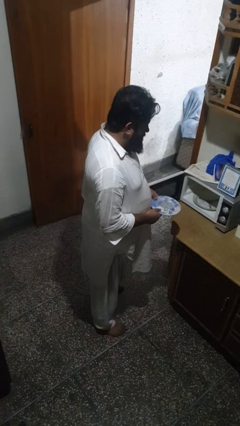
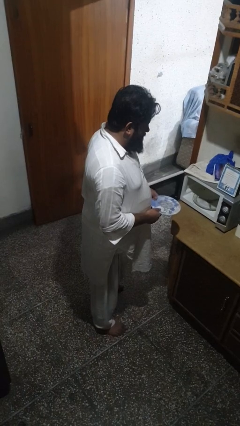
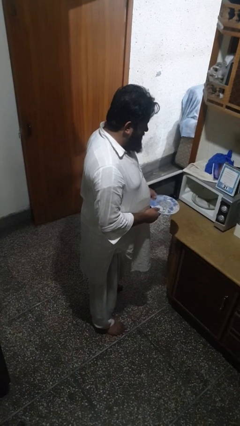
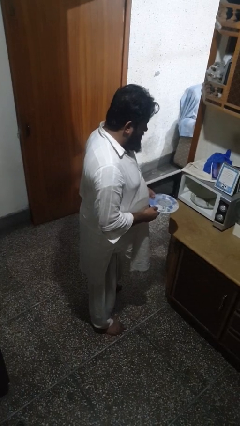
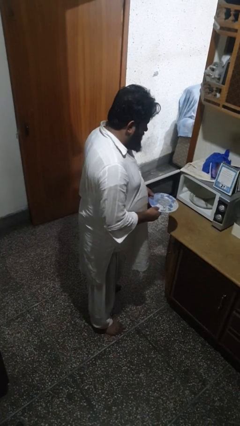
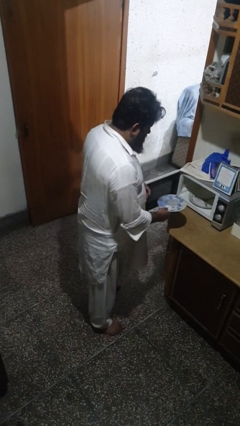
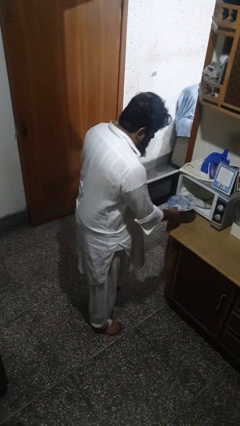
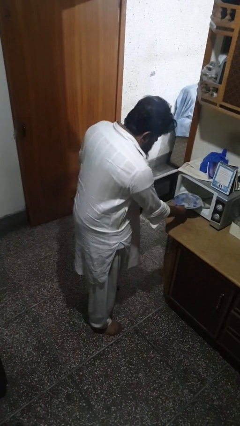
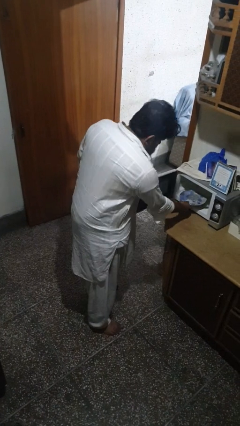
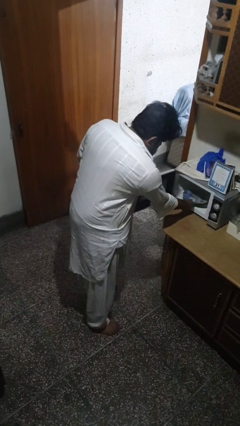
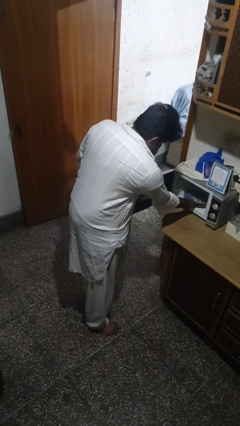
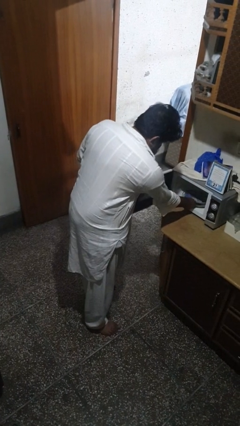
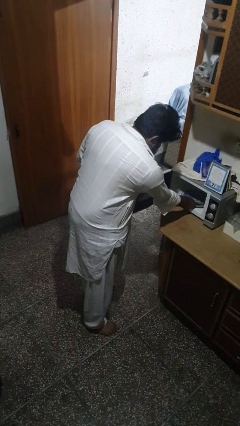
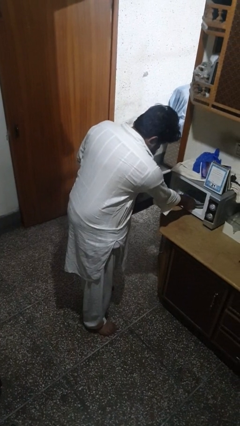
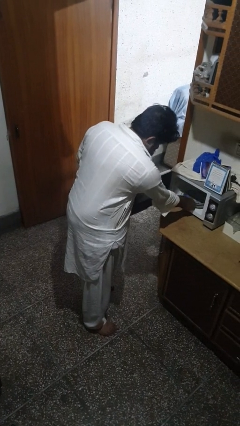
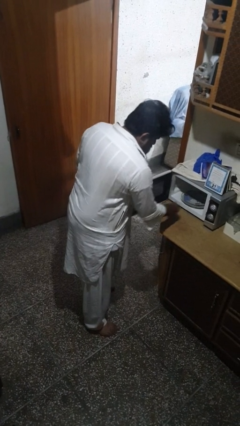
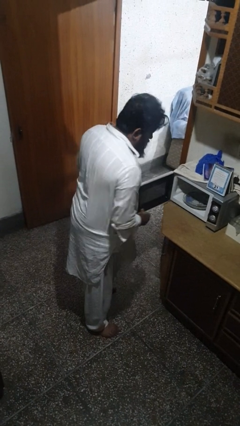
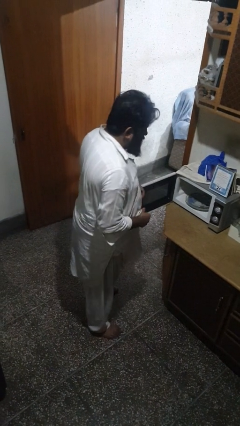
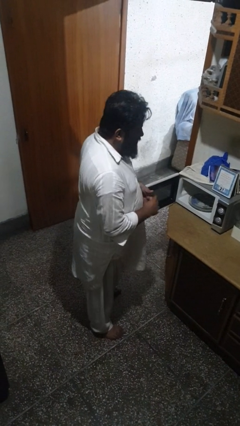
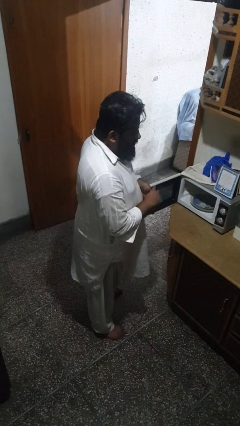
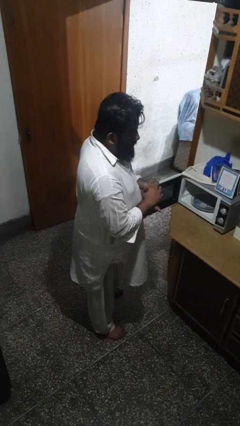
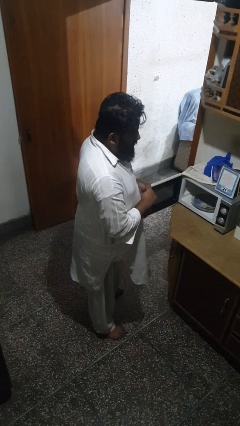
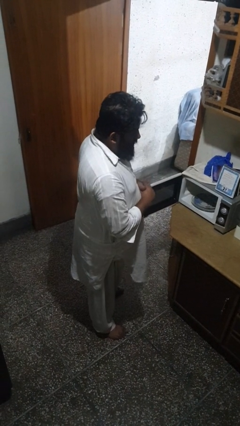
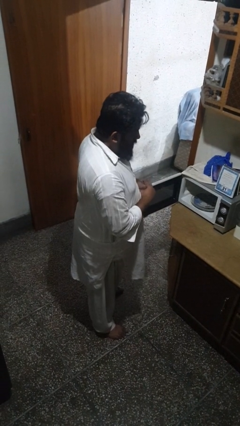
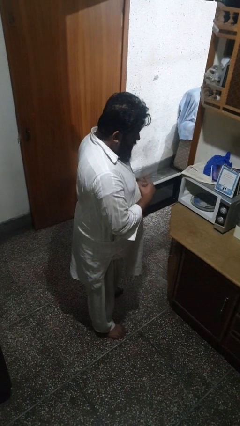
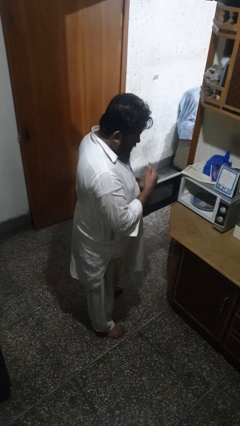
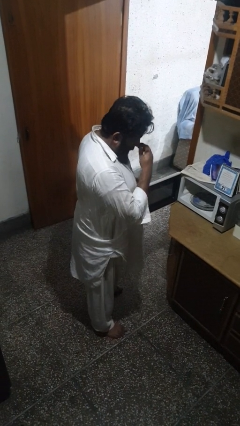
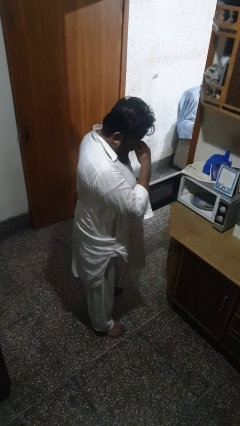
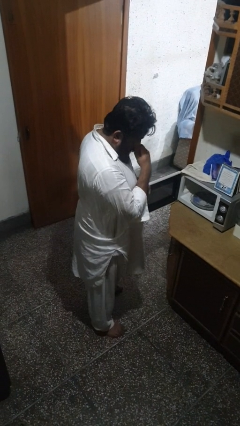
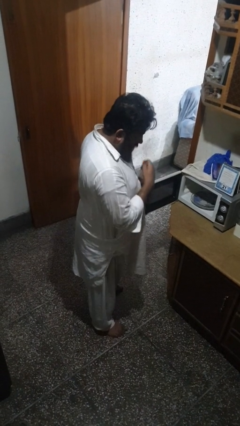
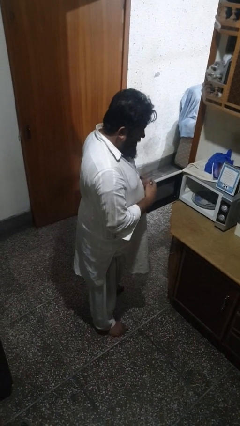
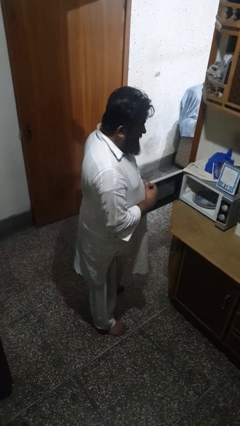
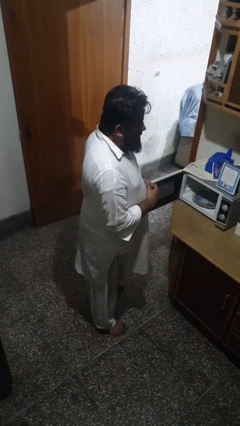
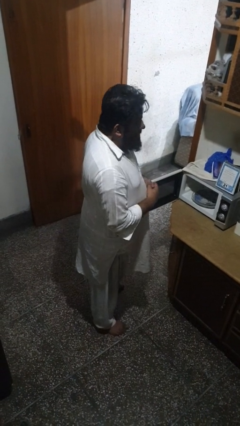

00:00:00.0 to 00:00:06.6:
person puts object into oven

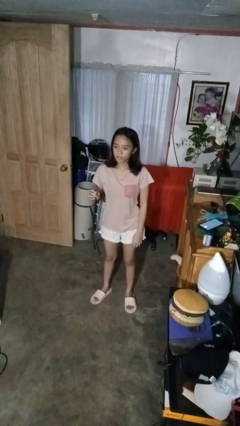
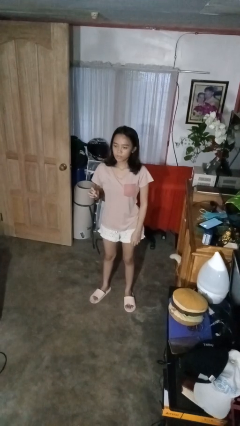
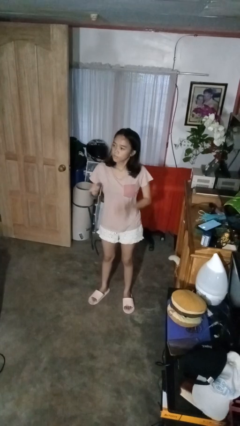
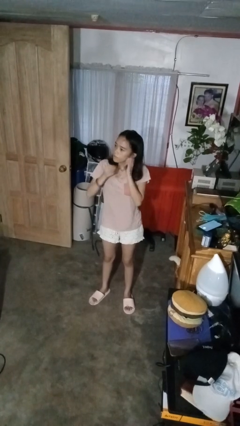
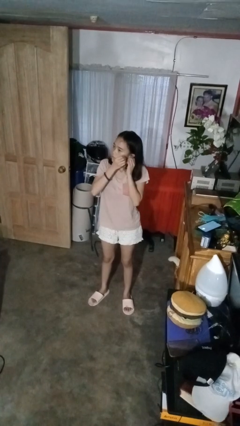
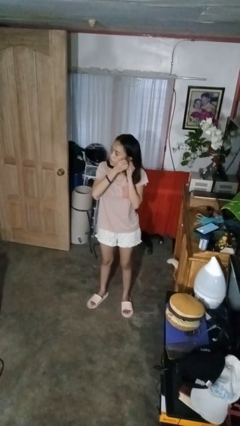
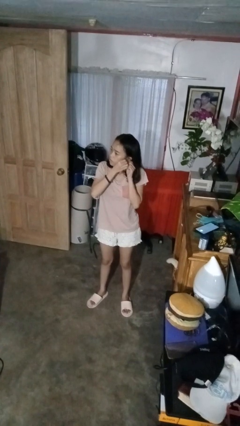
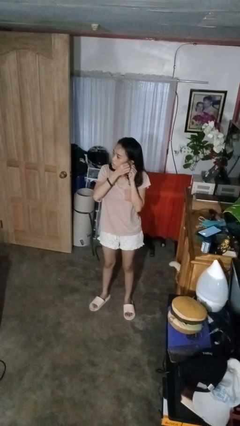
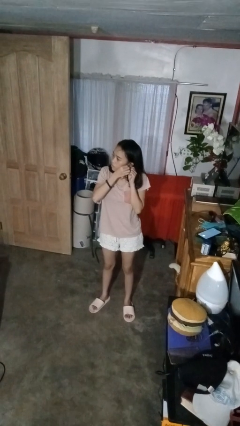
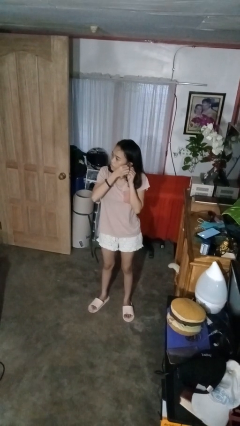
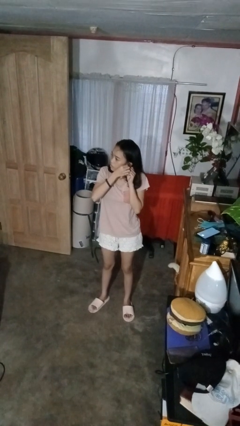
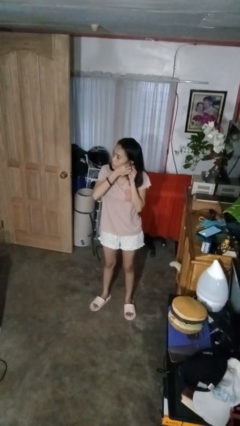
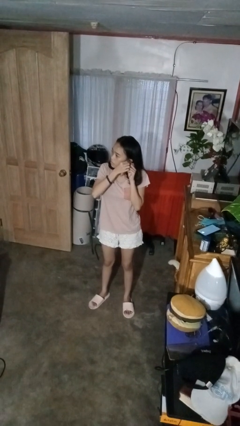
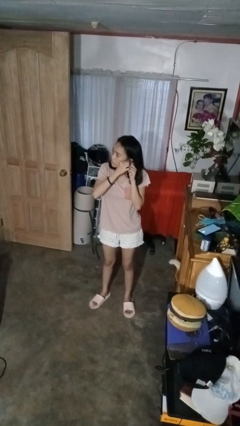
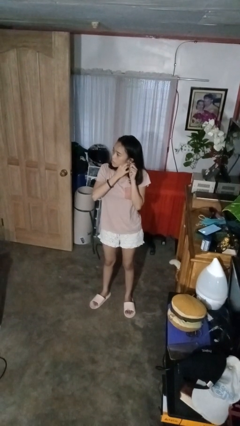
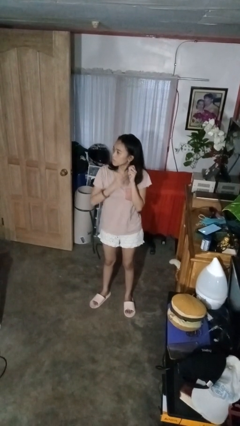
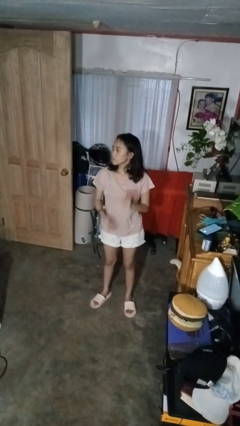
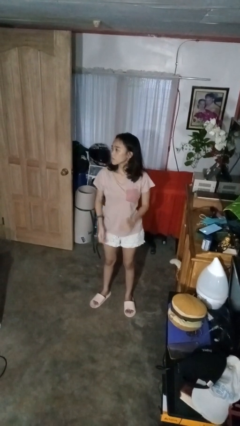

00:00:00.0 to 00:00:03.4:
person puts on earrings

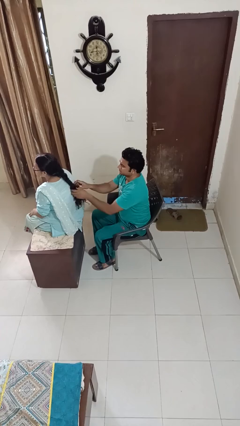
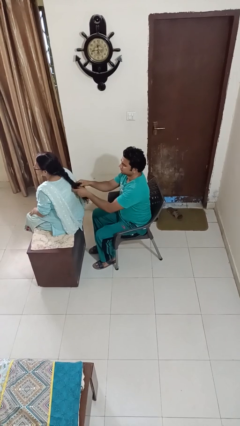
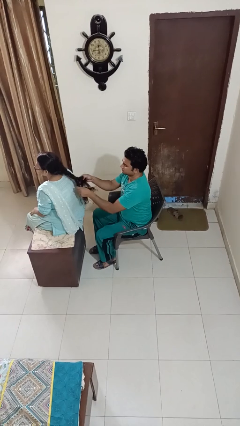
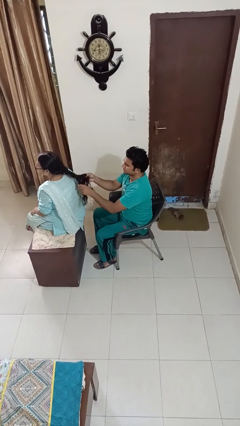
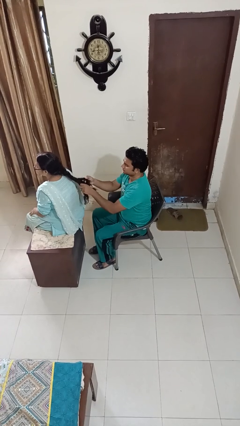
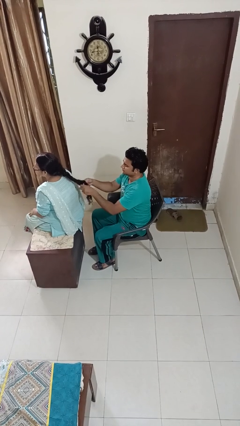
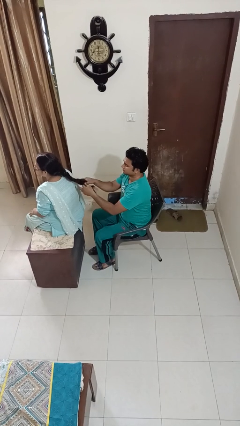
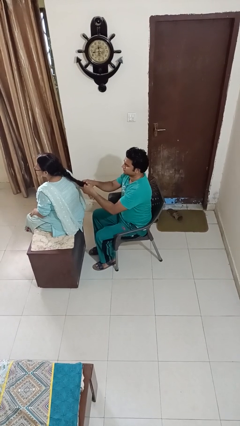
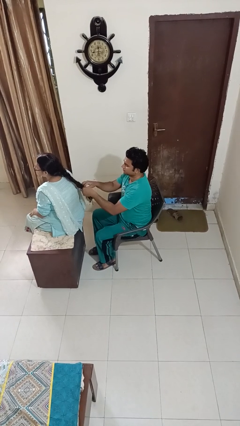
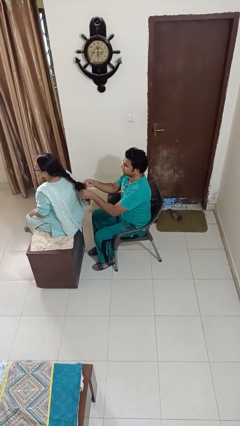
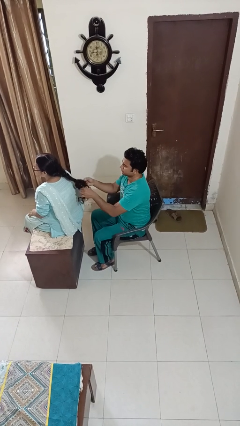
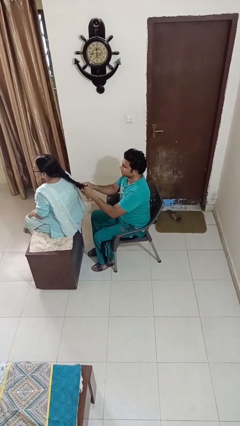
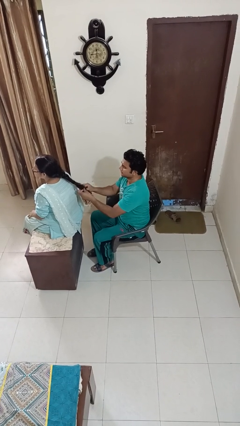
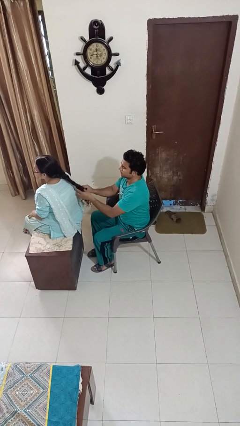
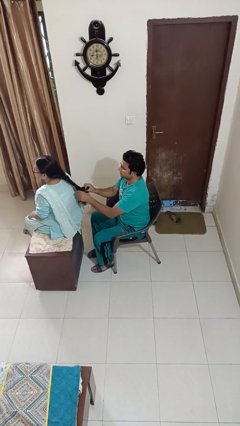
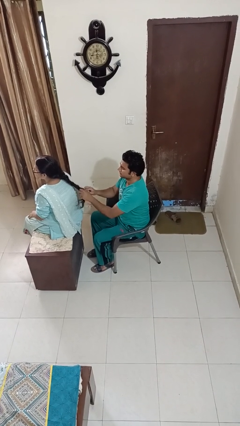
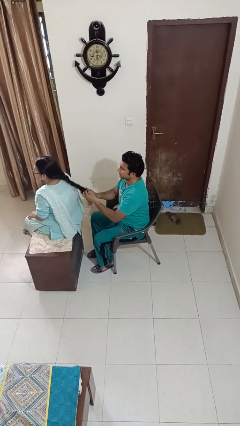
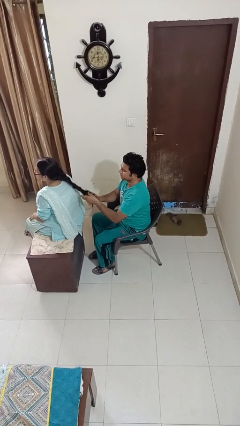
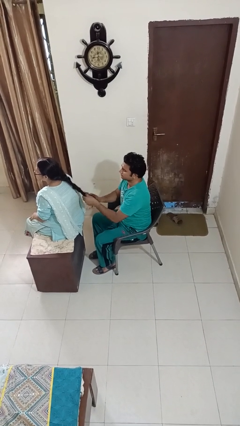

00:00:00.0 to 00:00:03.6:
person braids hair of person

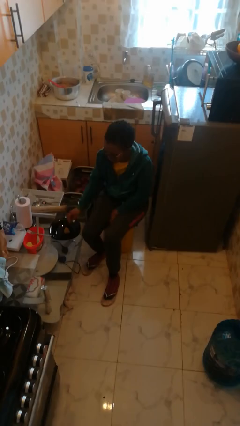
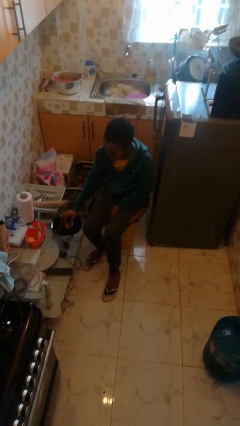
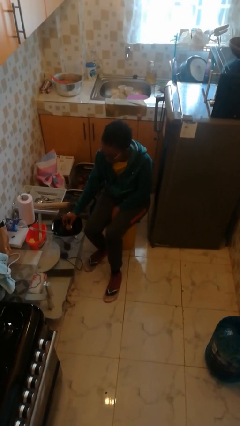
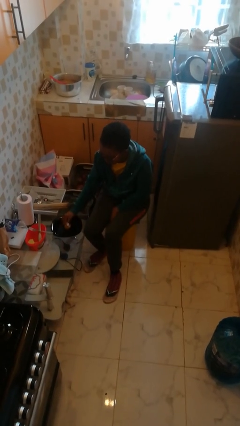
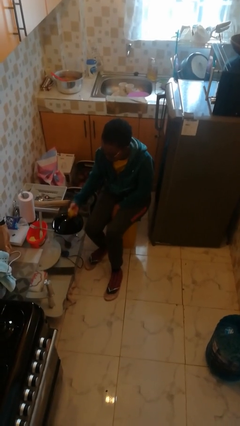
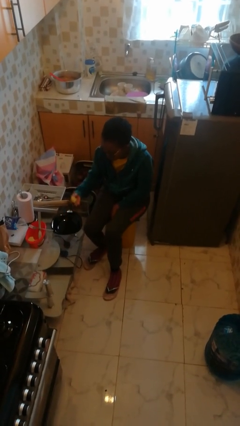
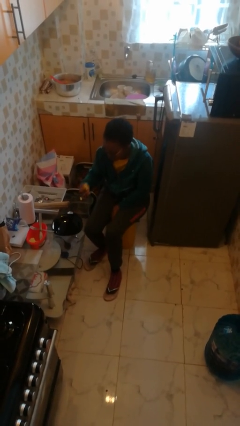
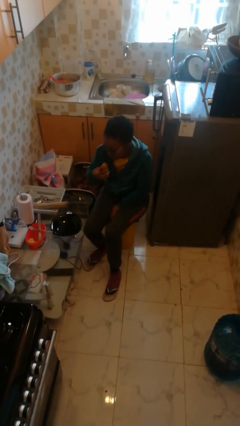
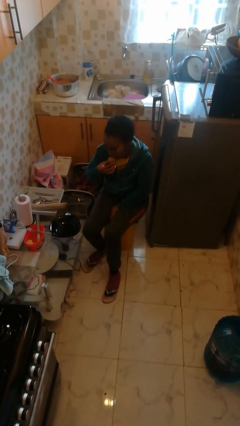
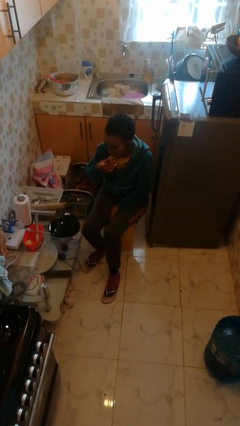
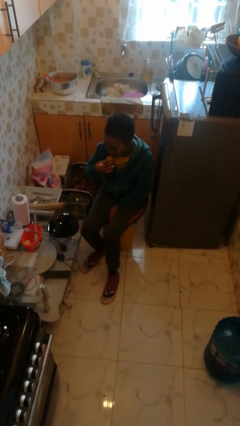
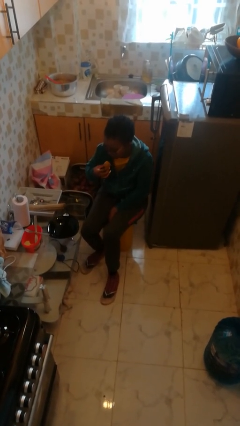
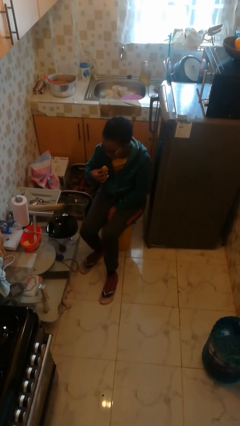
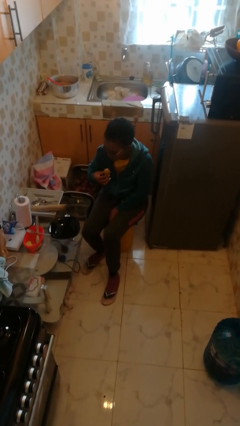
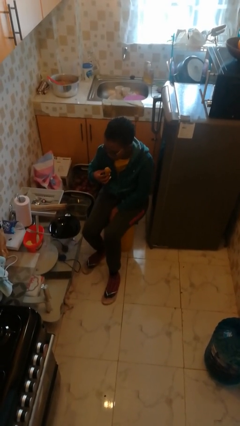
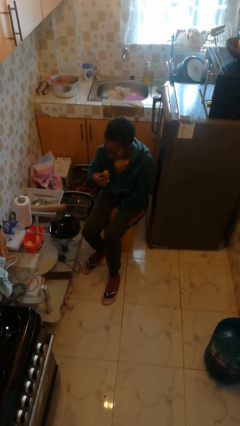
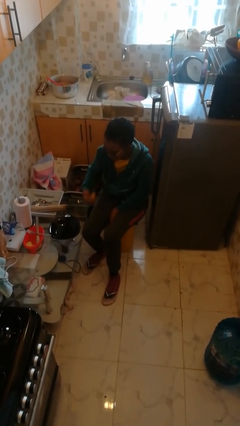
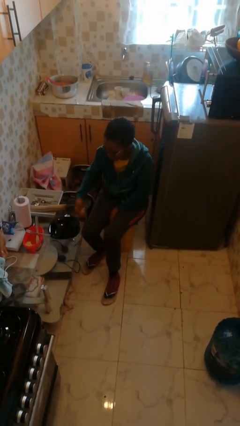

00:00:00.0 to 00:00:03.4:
person eats with hands

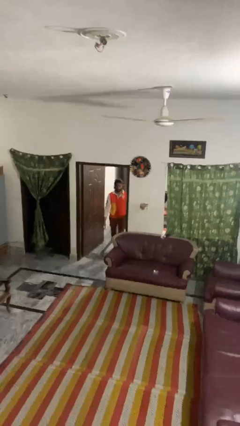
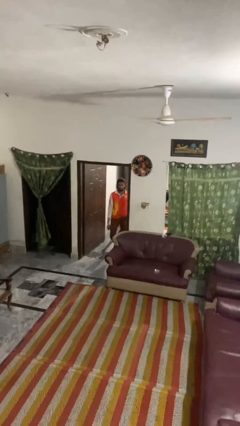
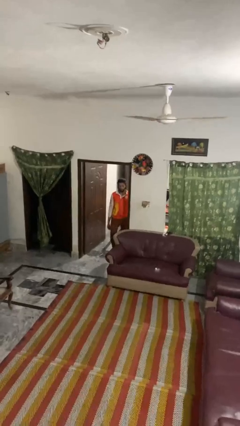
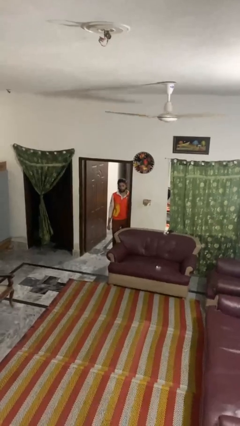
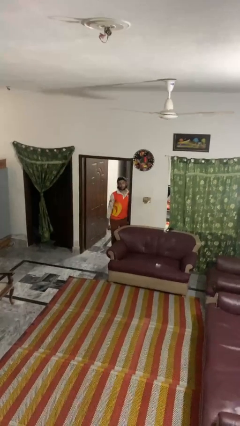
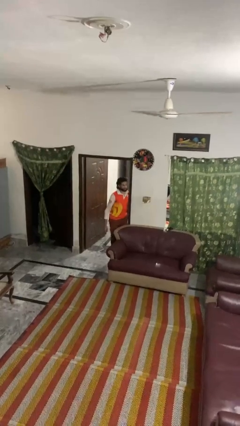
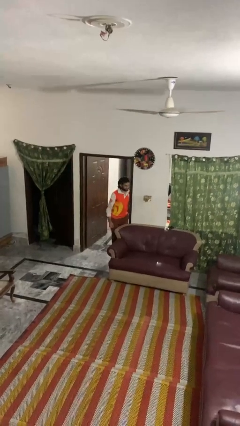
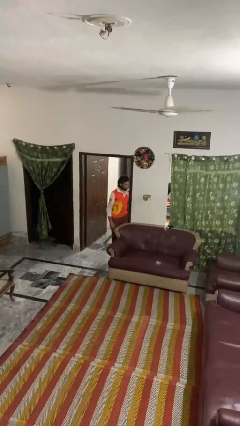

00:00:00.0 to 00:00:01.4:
person bumps into wall
